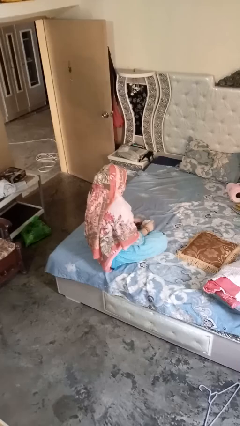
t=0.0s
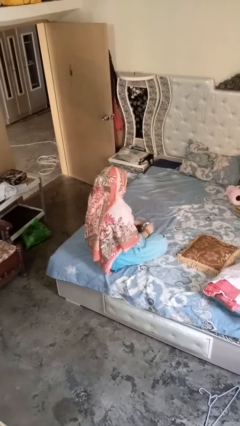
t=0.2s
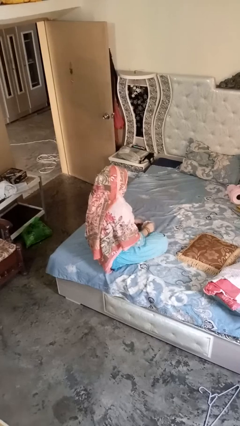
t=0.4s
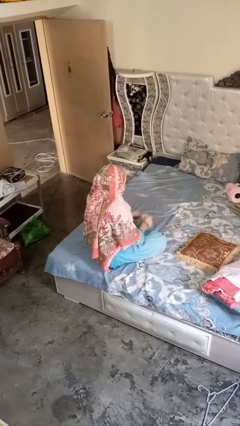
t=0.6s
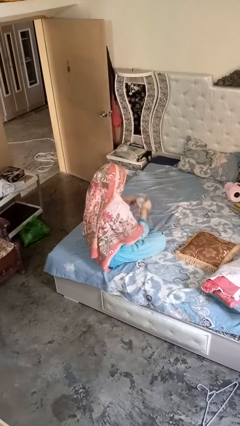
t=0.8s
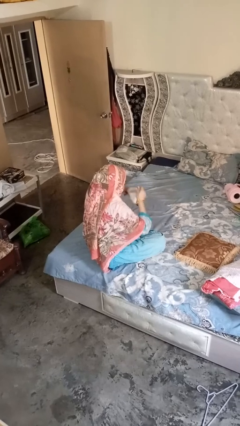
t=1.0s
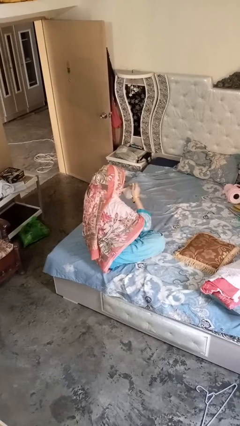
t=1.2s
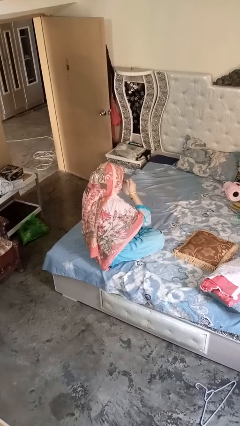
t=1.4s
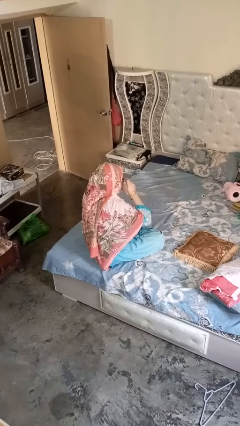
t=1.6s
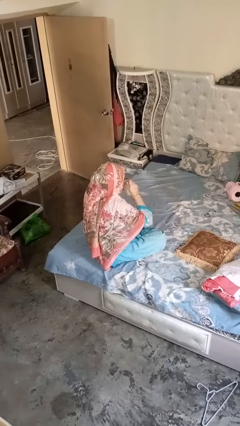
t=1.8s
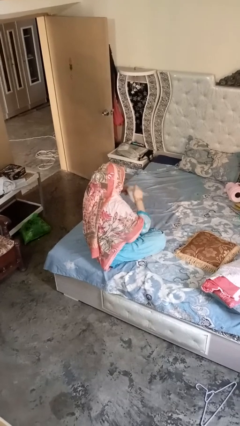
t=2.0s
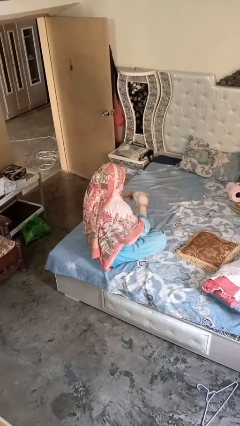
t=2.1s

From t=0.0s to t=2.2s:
person drinks from mug

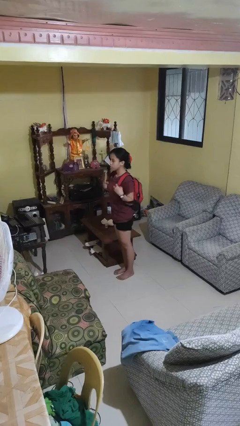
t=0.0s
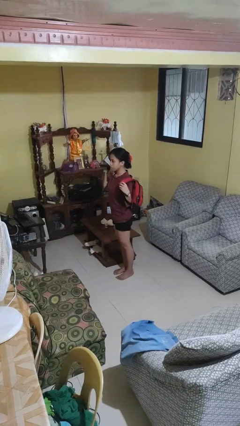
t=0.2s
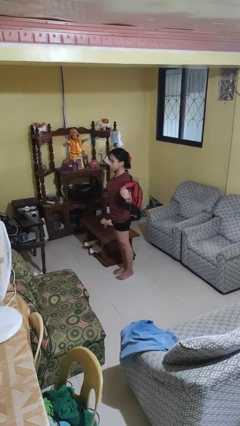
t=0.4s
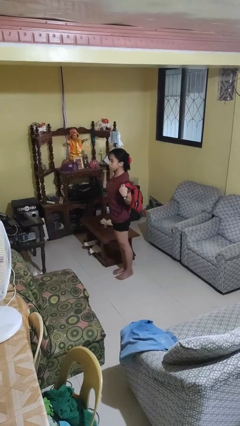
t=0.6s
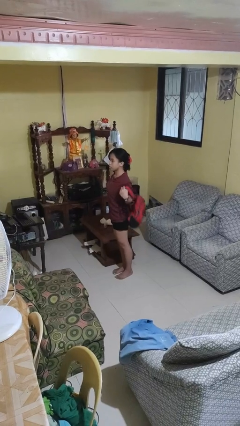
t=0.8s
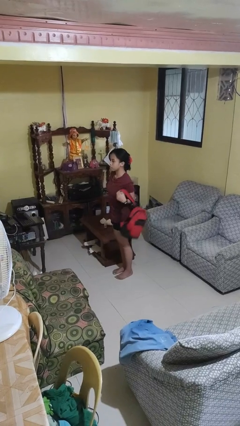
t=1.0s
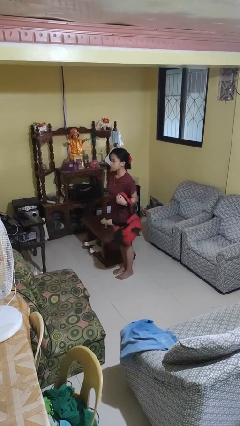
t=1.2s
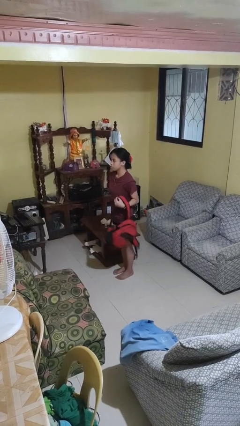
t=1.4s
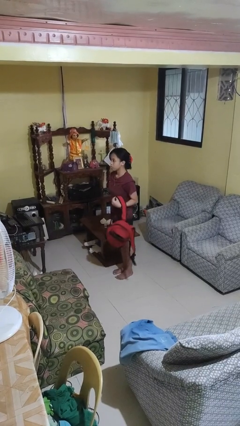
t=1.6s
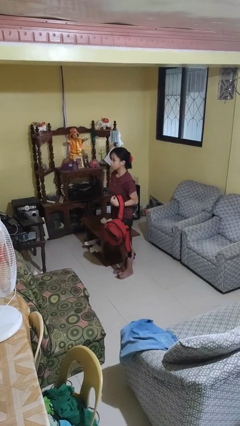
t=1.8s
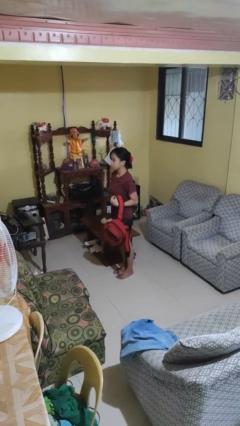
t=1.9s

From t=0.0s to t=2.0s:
person takes off backpack

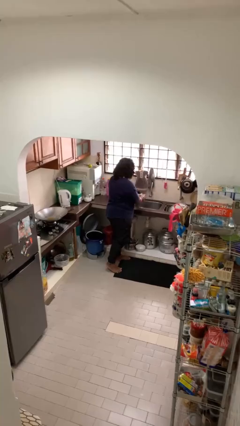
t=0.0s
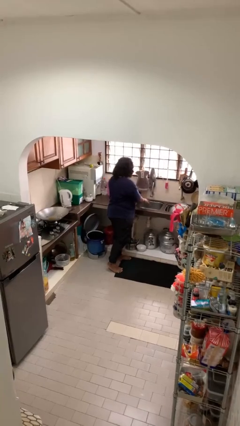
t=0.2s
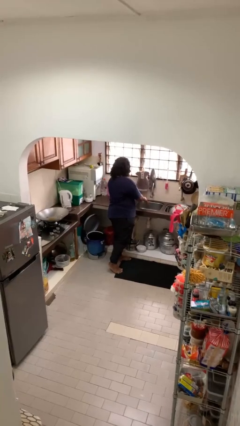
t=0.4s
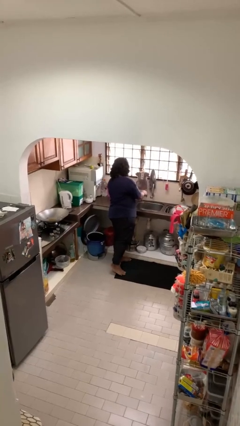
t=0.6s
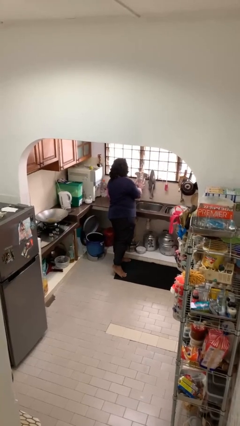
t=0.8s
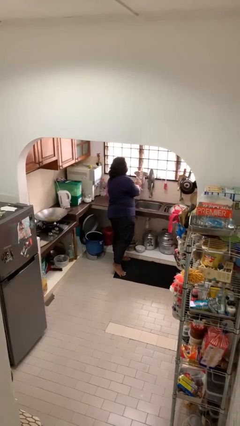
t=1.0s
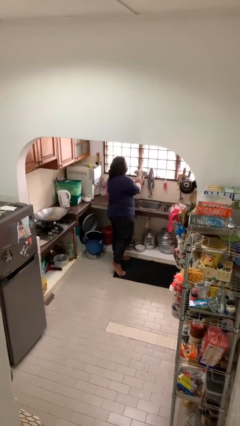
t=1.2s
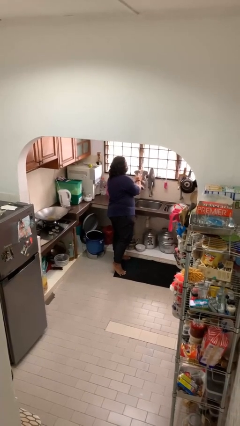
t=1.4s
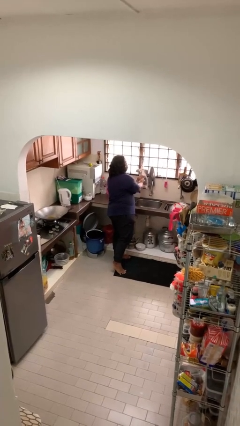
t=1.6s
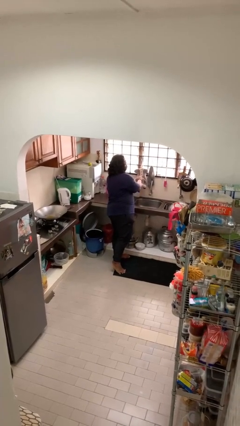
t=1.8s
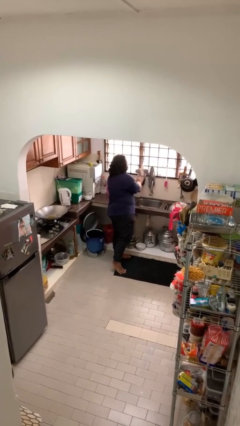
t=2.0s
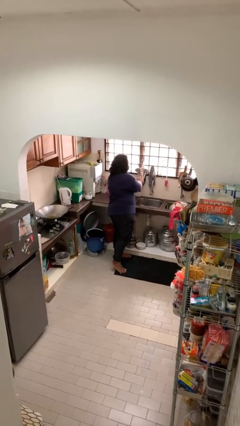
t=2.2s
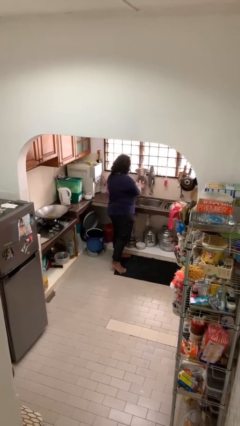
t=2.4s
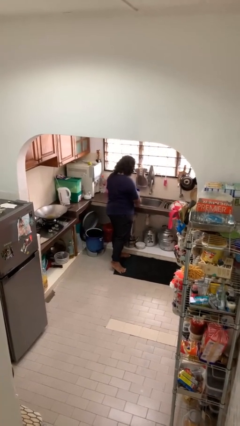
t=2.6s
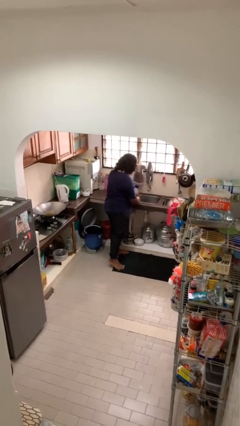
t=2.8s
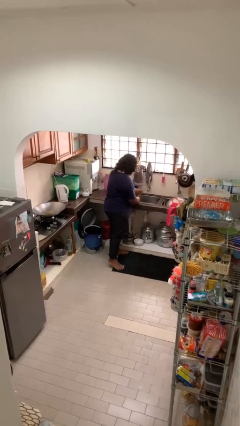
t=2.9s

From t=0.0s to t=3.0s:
person dries hands with towel

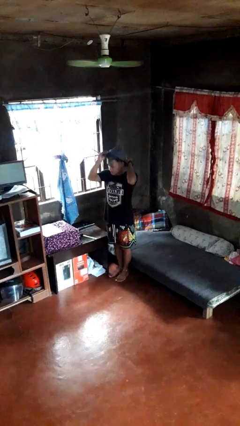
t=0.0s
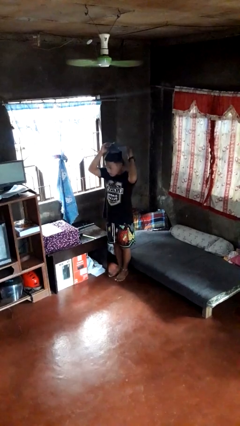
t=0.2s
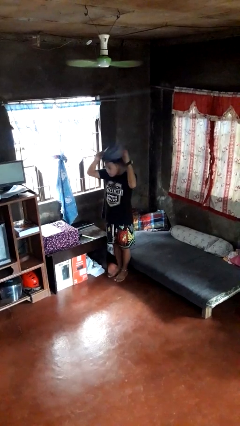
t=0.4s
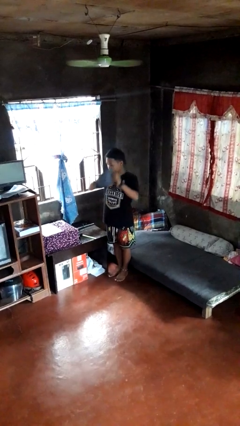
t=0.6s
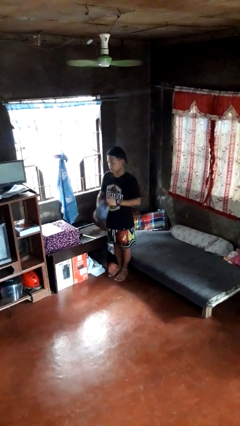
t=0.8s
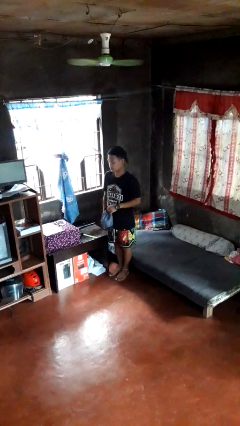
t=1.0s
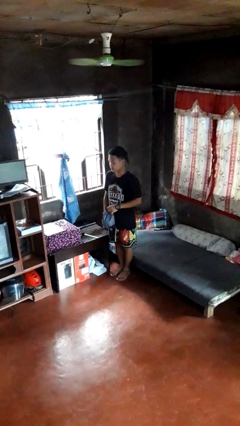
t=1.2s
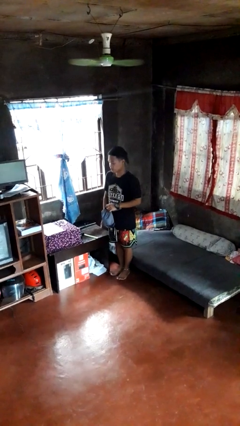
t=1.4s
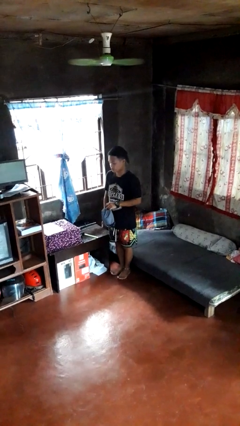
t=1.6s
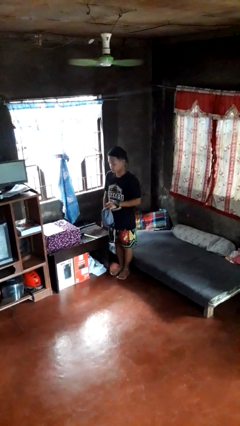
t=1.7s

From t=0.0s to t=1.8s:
person takes off hat

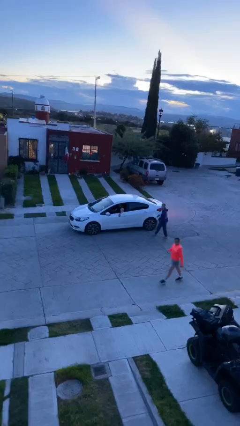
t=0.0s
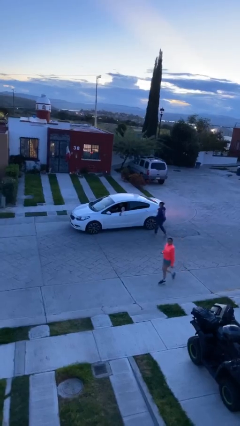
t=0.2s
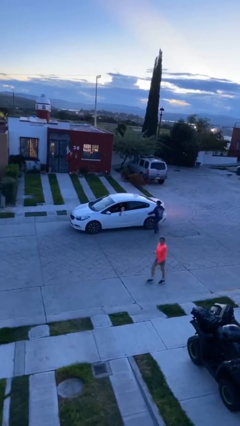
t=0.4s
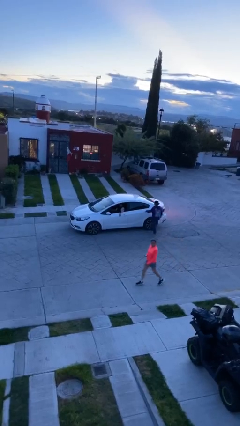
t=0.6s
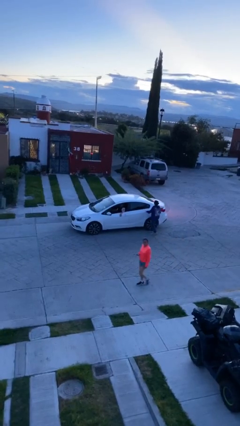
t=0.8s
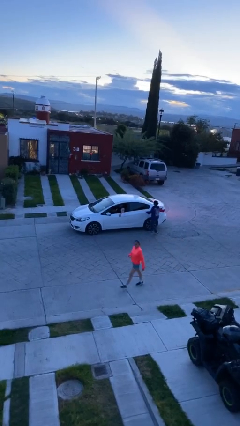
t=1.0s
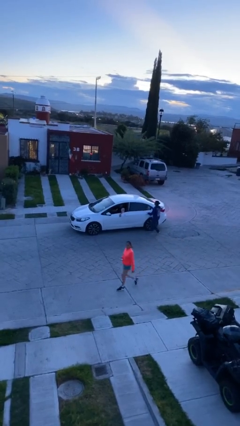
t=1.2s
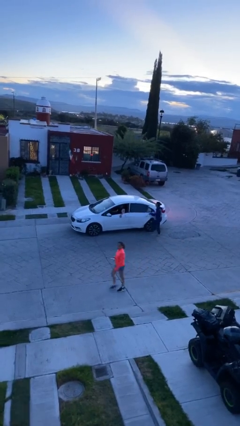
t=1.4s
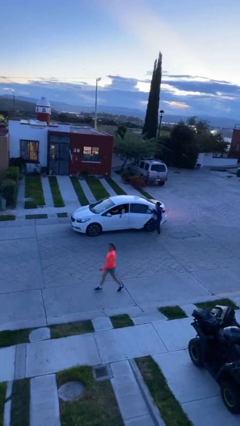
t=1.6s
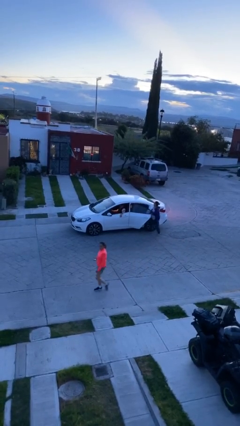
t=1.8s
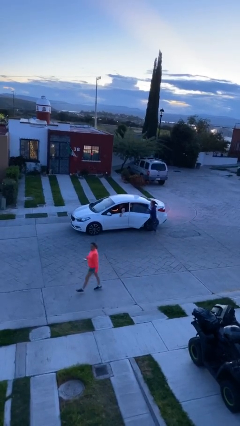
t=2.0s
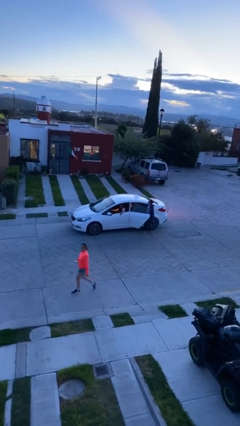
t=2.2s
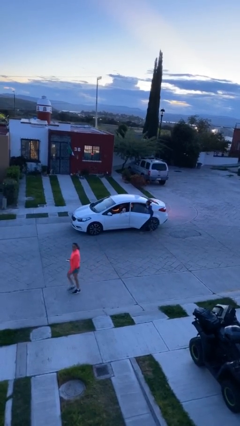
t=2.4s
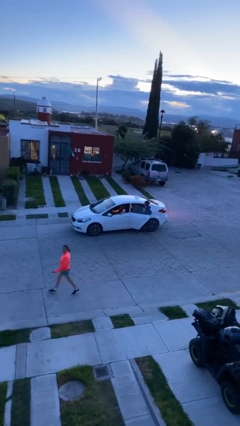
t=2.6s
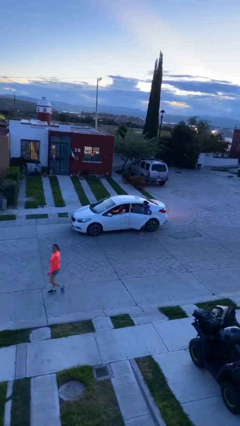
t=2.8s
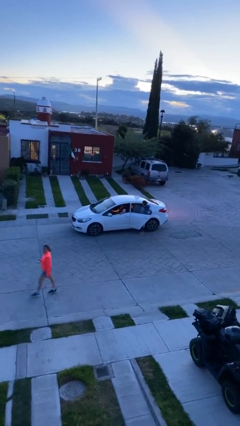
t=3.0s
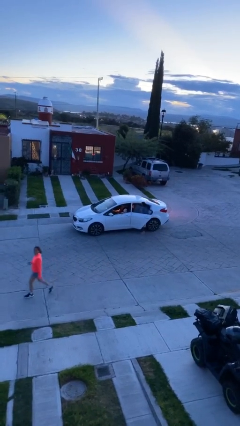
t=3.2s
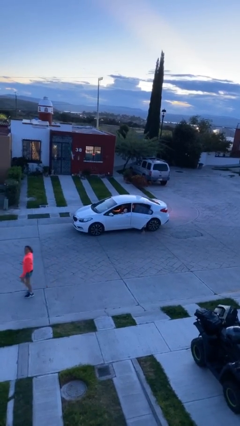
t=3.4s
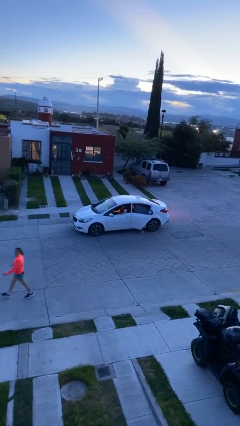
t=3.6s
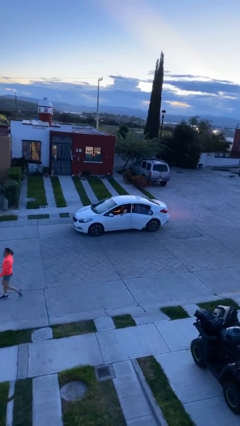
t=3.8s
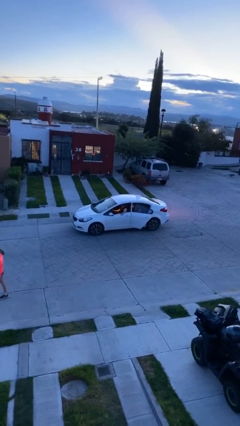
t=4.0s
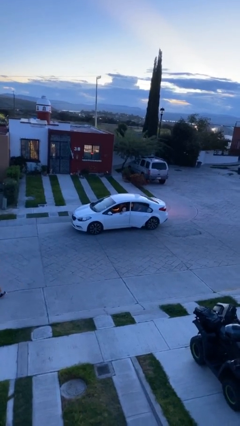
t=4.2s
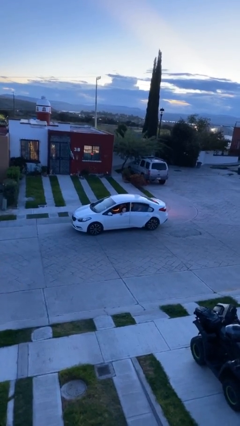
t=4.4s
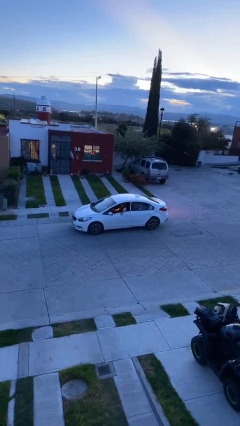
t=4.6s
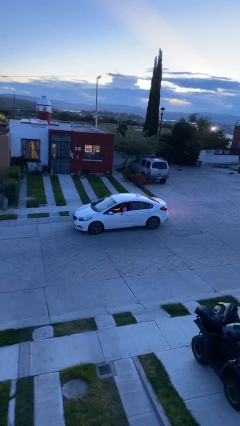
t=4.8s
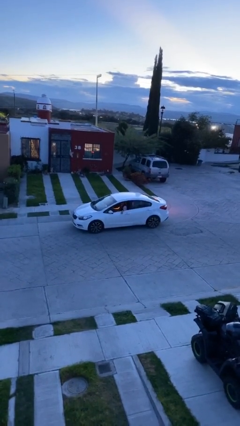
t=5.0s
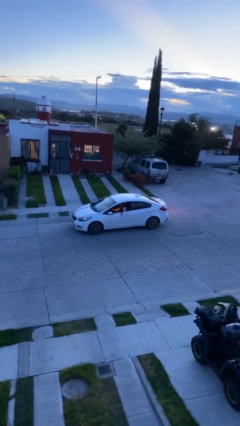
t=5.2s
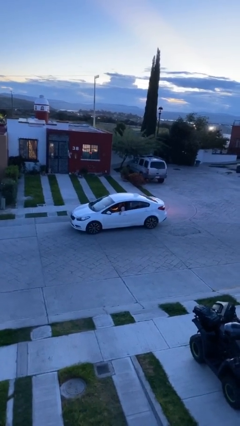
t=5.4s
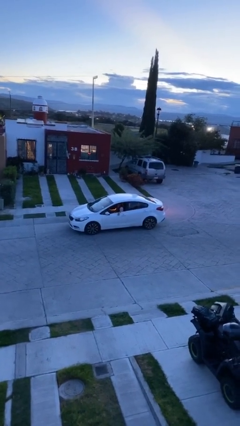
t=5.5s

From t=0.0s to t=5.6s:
car picks up person

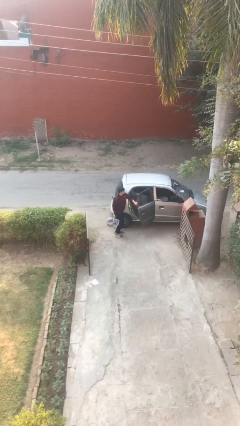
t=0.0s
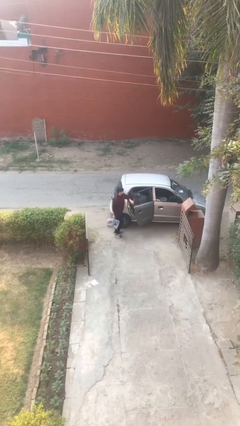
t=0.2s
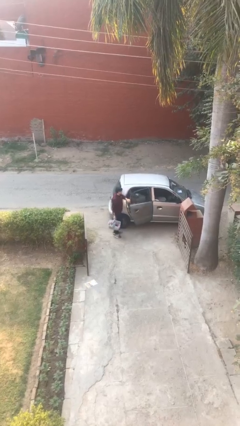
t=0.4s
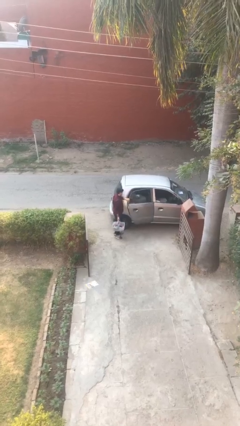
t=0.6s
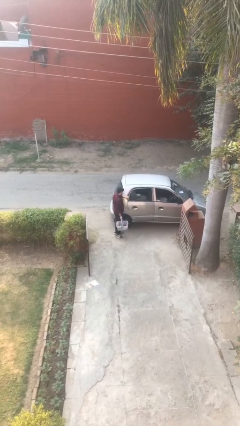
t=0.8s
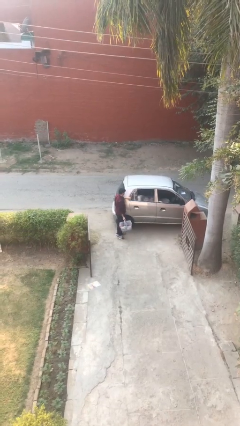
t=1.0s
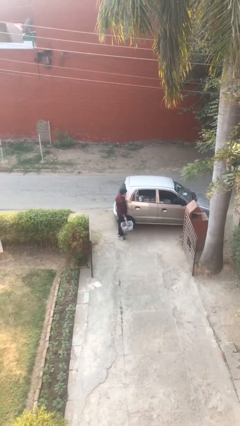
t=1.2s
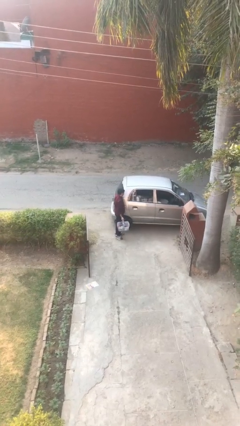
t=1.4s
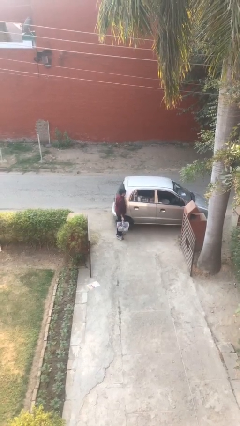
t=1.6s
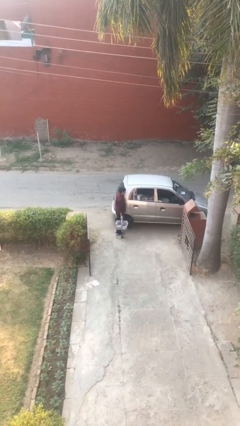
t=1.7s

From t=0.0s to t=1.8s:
person closes car door

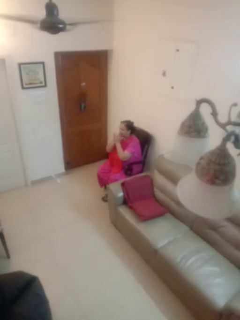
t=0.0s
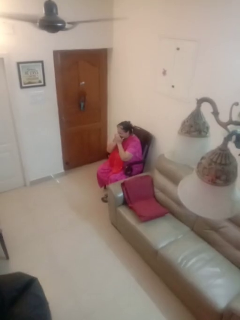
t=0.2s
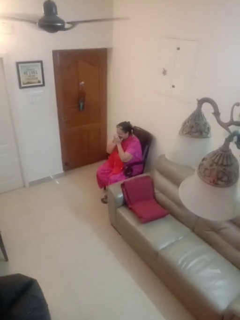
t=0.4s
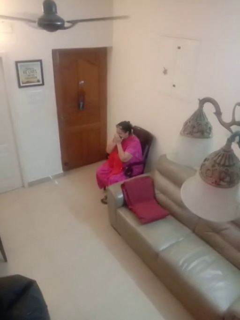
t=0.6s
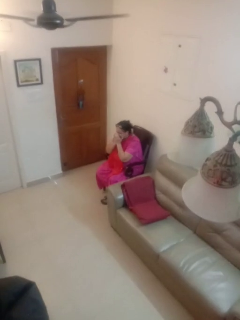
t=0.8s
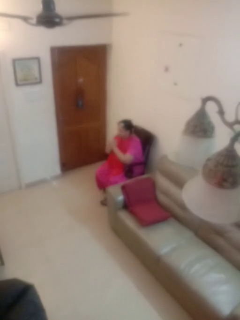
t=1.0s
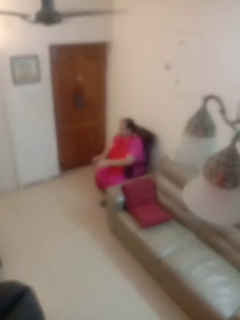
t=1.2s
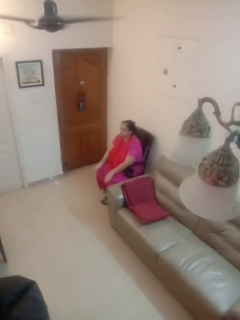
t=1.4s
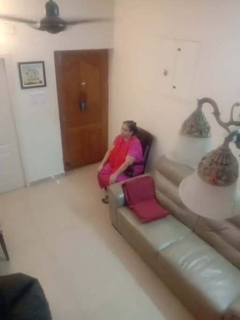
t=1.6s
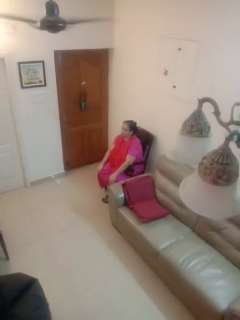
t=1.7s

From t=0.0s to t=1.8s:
person sneezes into hand
